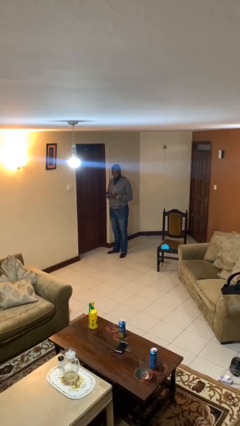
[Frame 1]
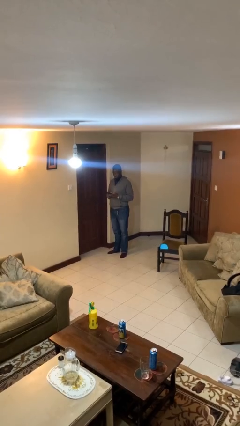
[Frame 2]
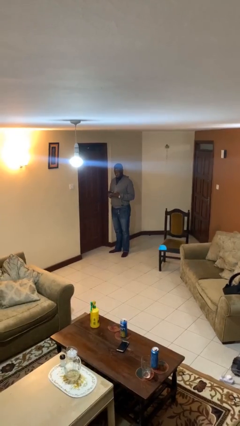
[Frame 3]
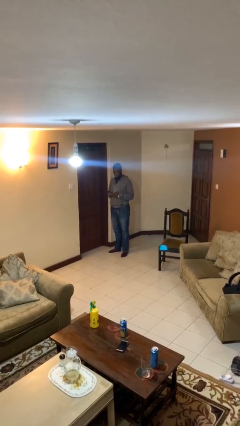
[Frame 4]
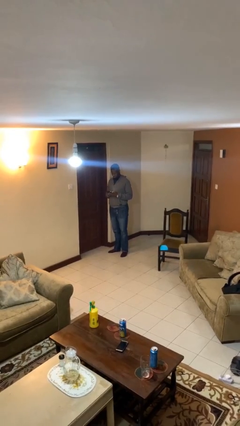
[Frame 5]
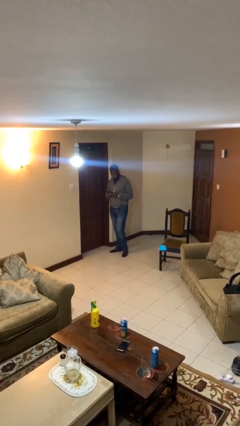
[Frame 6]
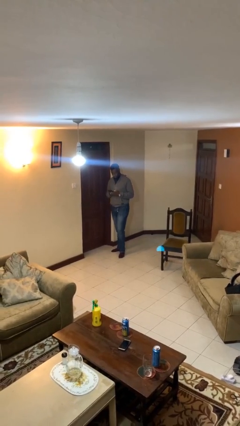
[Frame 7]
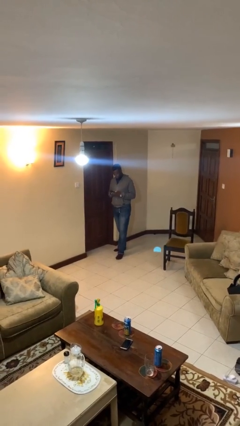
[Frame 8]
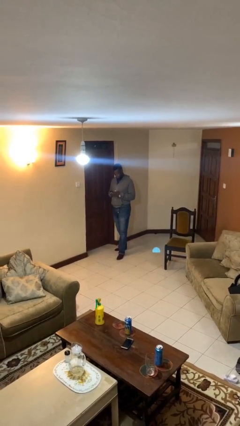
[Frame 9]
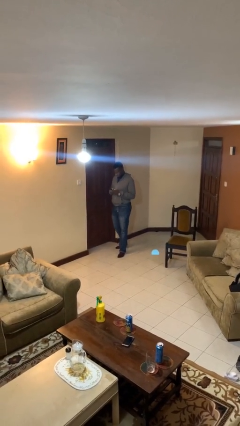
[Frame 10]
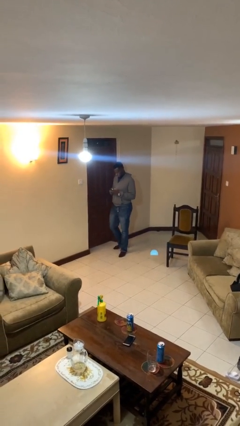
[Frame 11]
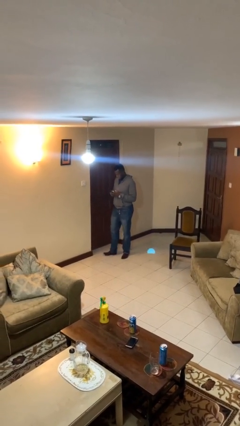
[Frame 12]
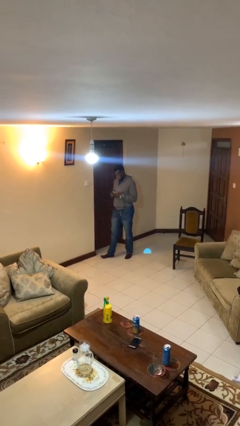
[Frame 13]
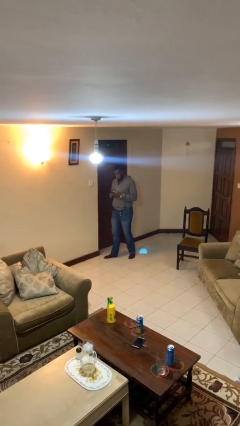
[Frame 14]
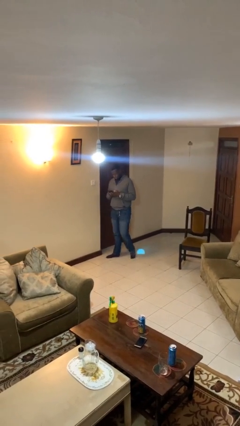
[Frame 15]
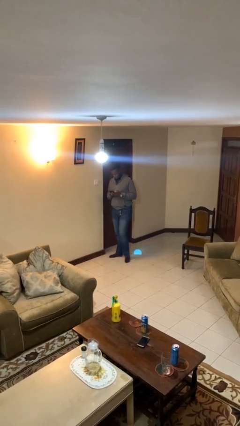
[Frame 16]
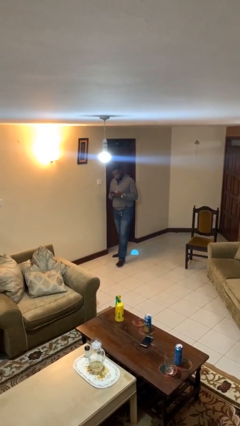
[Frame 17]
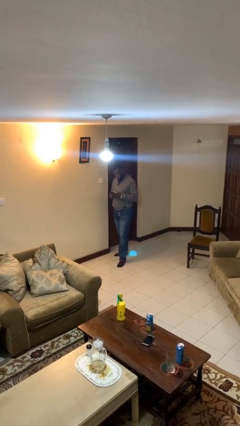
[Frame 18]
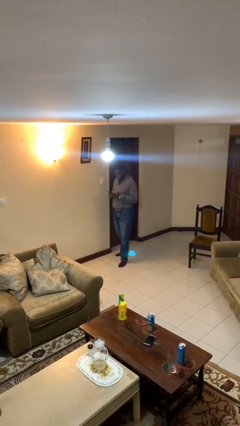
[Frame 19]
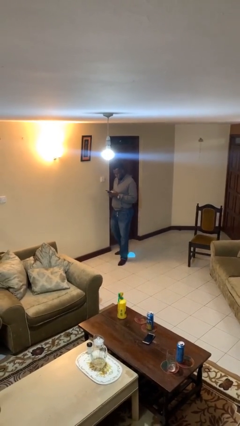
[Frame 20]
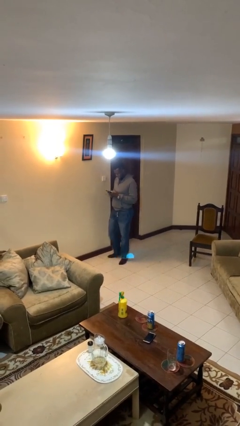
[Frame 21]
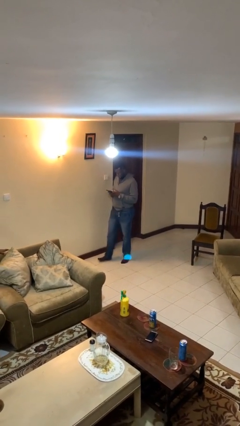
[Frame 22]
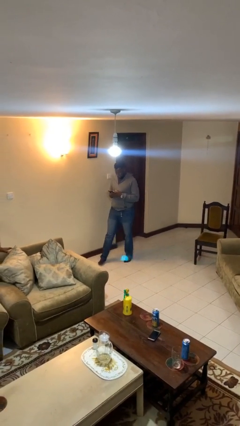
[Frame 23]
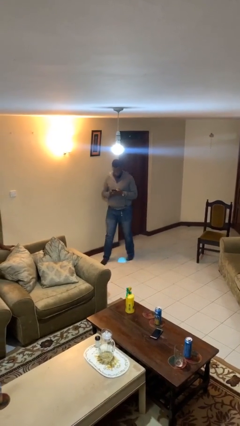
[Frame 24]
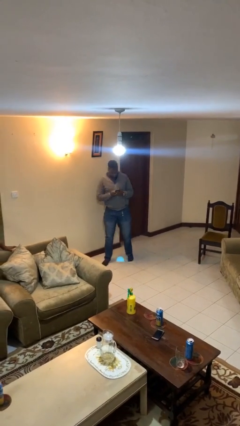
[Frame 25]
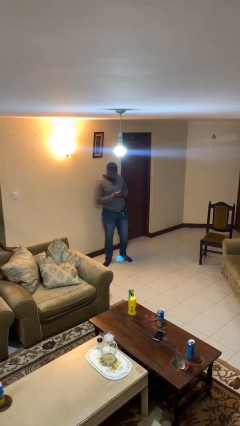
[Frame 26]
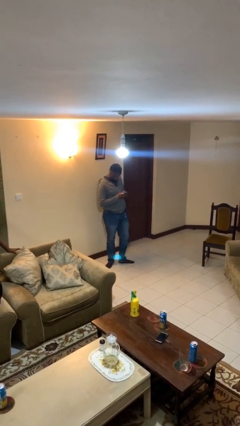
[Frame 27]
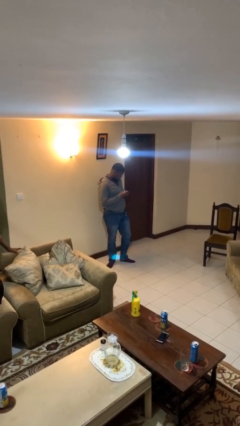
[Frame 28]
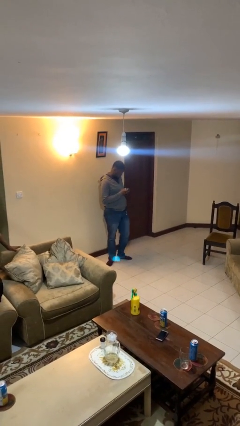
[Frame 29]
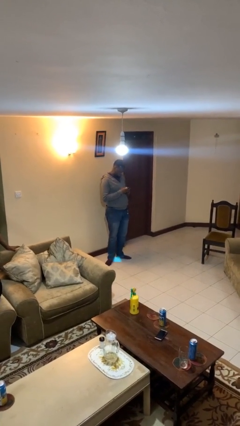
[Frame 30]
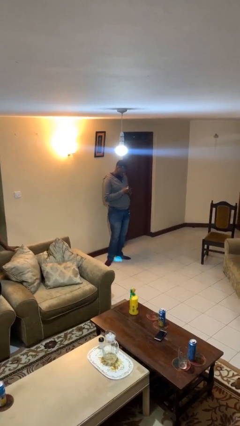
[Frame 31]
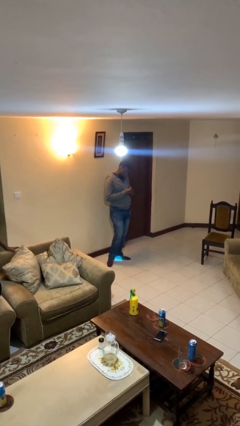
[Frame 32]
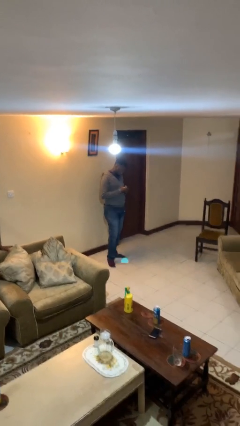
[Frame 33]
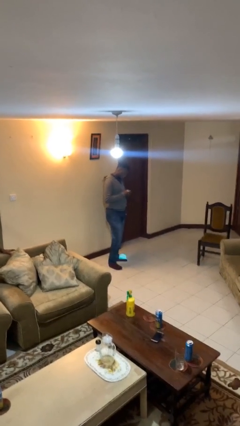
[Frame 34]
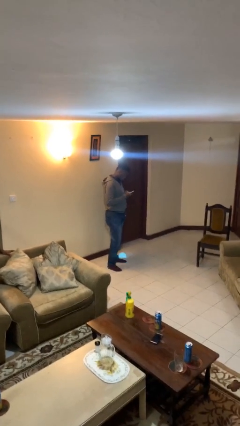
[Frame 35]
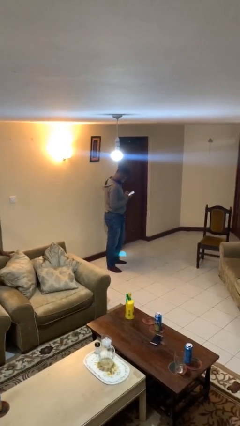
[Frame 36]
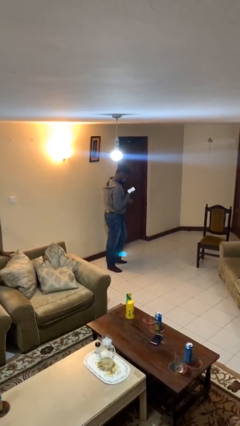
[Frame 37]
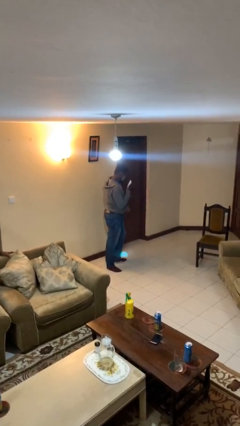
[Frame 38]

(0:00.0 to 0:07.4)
person texts on phone

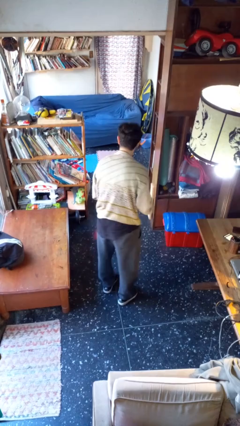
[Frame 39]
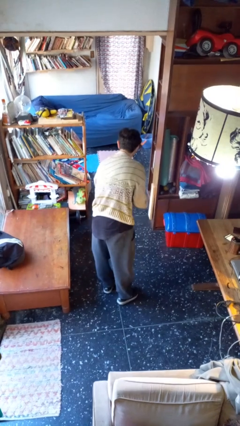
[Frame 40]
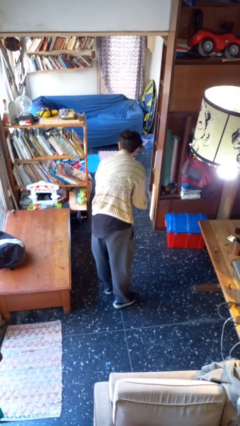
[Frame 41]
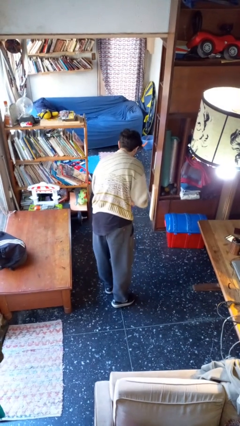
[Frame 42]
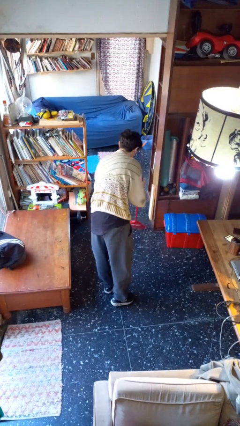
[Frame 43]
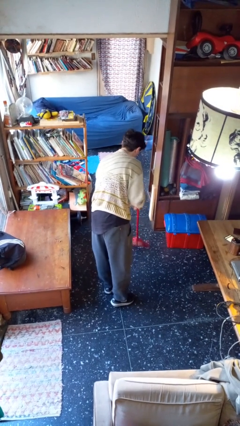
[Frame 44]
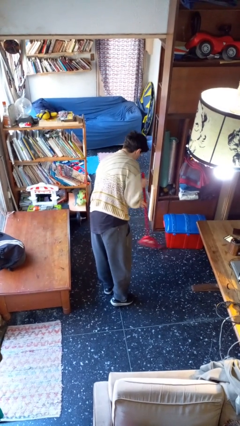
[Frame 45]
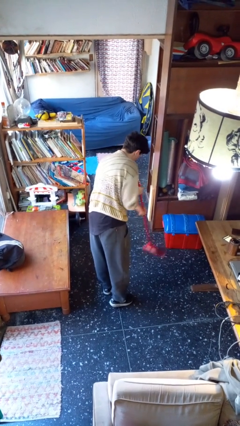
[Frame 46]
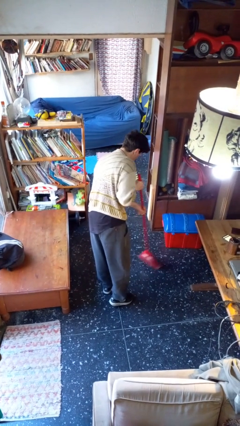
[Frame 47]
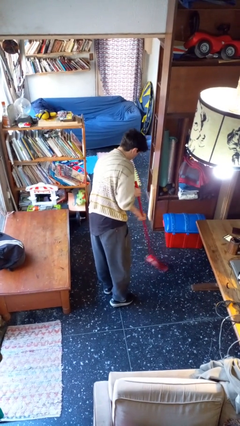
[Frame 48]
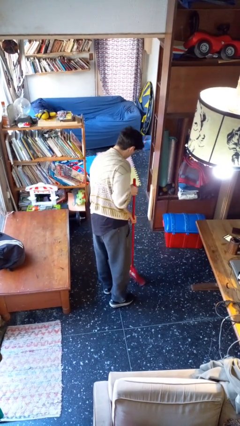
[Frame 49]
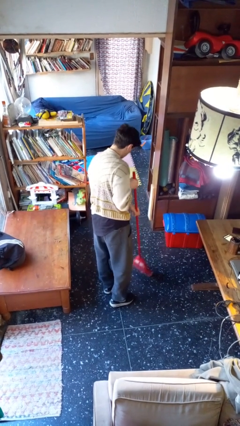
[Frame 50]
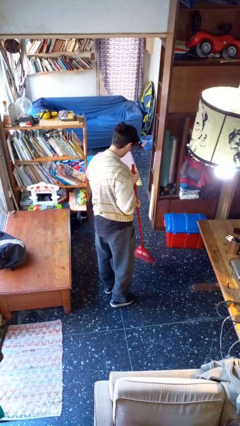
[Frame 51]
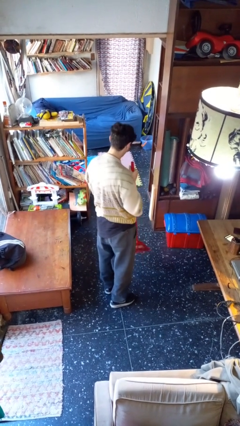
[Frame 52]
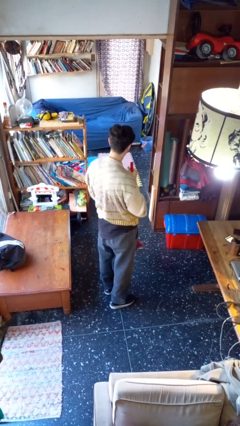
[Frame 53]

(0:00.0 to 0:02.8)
person sweeps floor

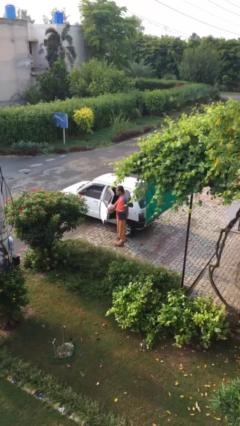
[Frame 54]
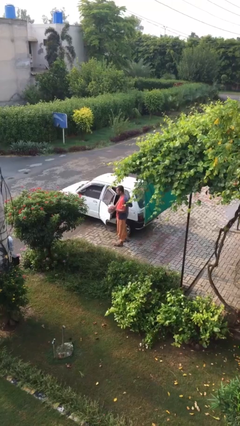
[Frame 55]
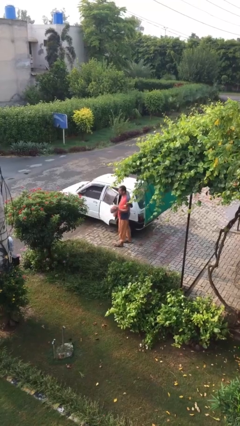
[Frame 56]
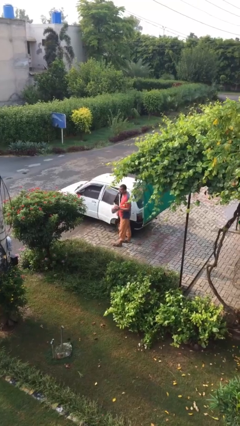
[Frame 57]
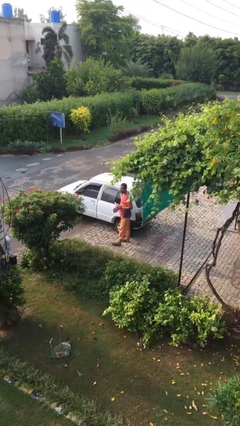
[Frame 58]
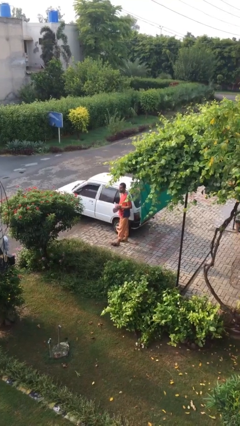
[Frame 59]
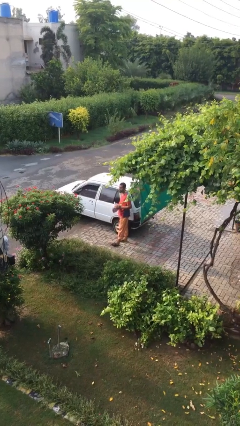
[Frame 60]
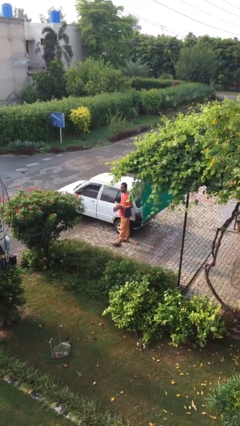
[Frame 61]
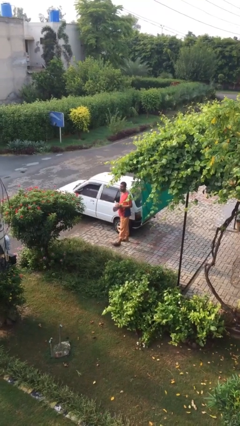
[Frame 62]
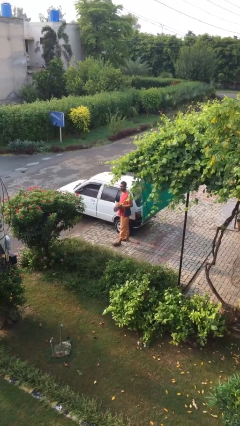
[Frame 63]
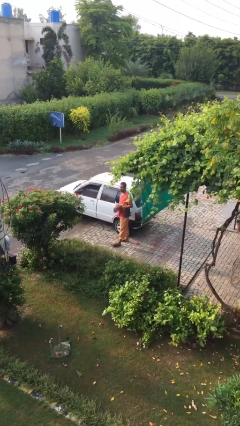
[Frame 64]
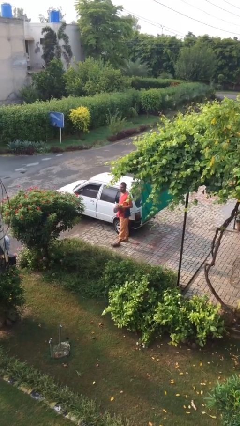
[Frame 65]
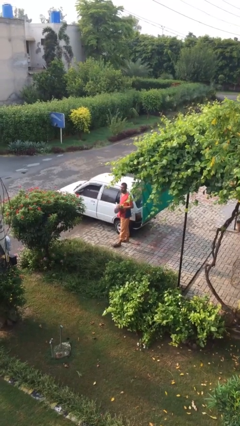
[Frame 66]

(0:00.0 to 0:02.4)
person closes car door

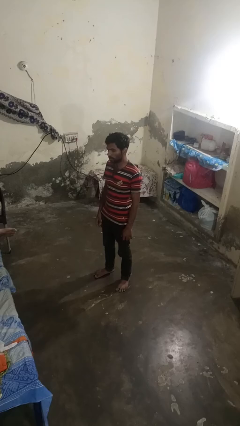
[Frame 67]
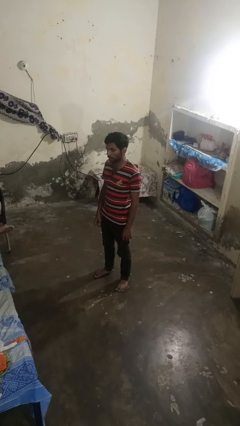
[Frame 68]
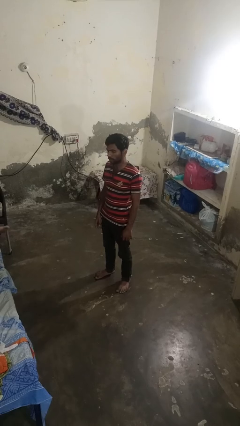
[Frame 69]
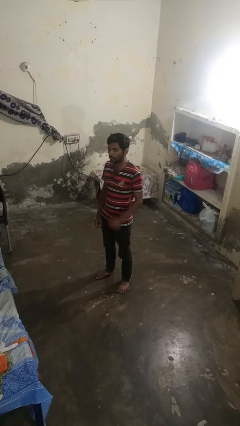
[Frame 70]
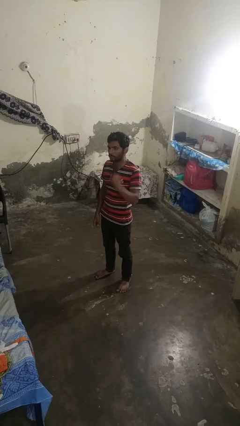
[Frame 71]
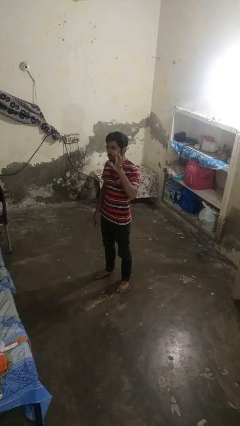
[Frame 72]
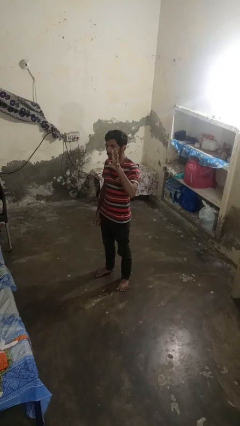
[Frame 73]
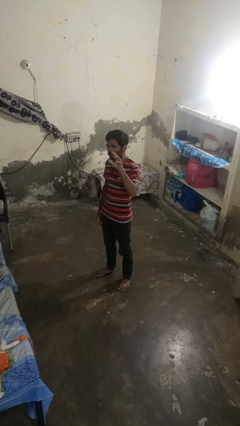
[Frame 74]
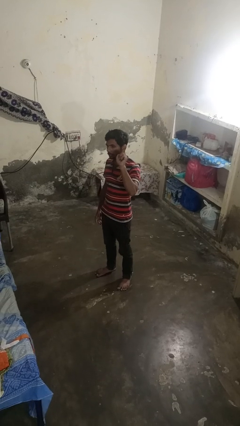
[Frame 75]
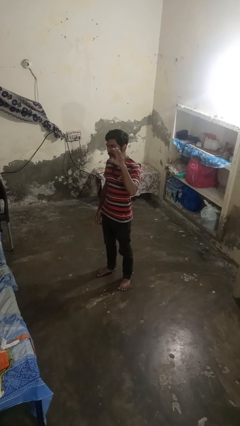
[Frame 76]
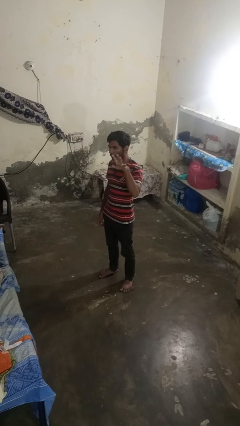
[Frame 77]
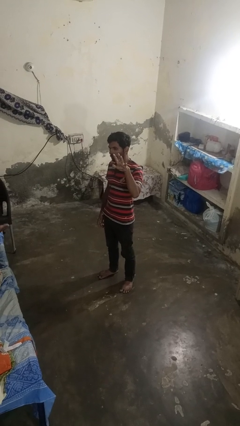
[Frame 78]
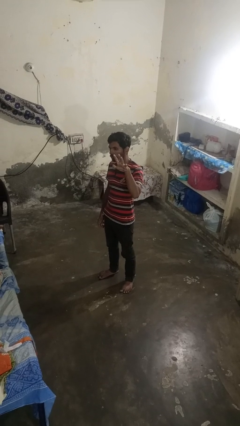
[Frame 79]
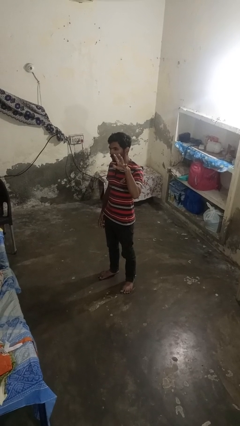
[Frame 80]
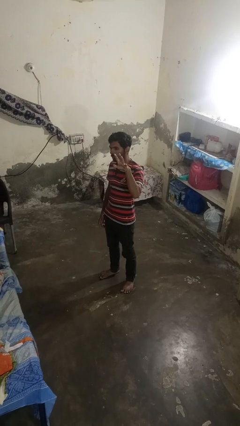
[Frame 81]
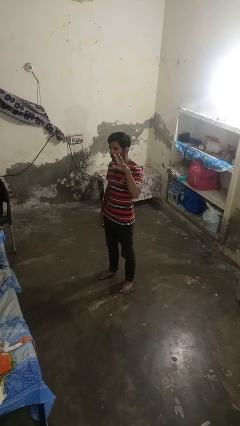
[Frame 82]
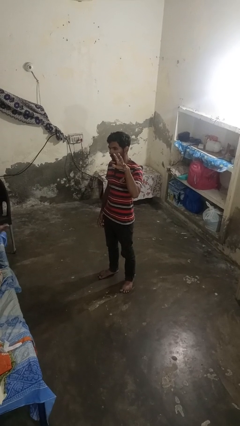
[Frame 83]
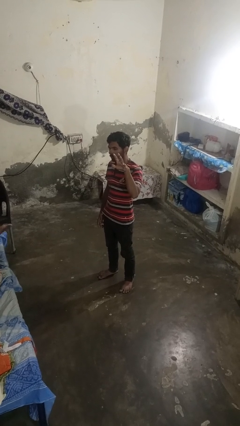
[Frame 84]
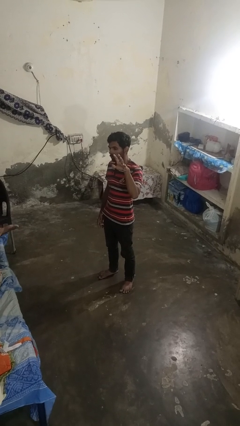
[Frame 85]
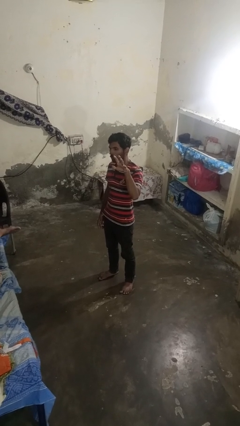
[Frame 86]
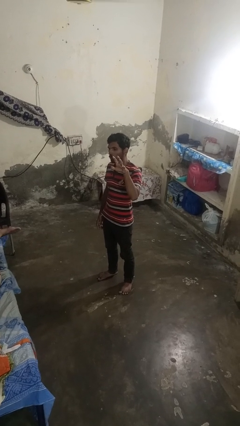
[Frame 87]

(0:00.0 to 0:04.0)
person gestures number five

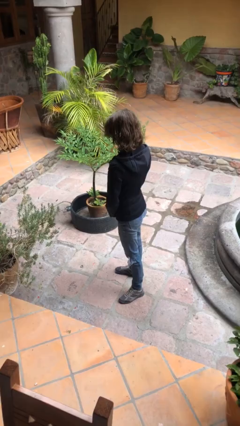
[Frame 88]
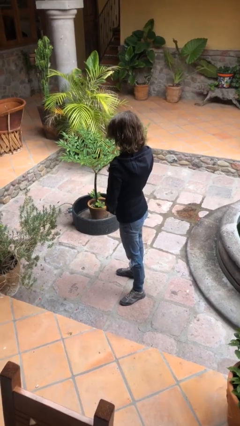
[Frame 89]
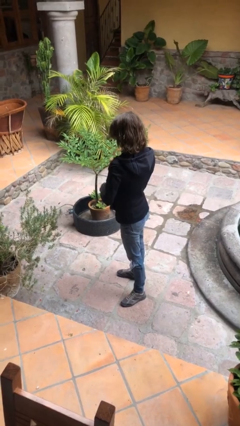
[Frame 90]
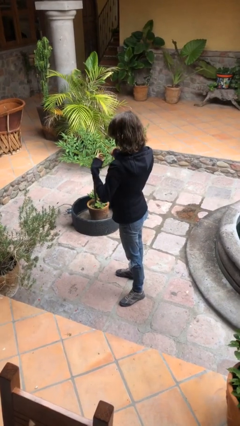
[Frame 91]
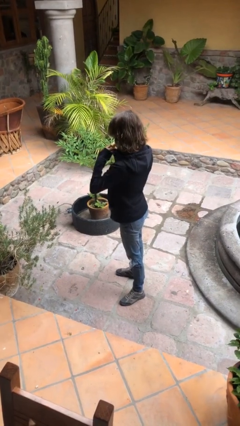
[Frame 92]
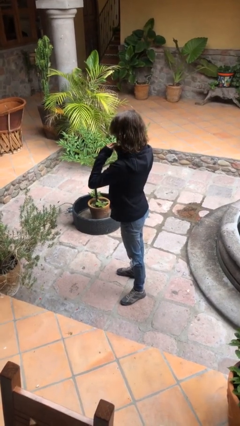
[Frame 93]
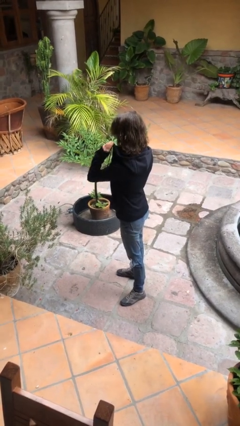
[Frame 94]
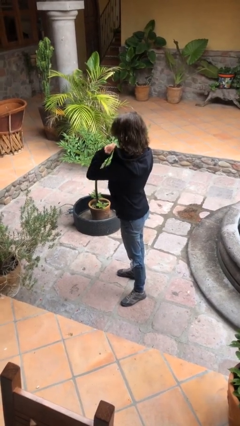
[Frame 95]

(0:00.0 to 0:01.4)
person unzips jacket
